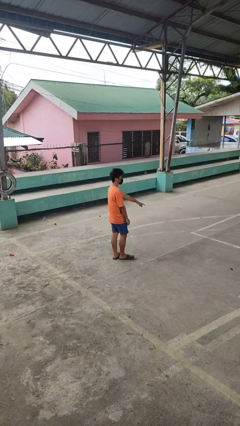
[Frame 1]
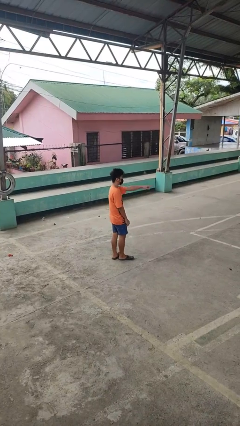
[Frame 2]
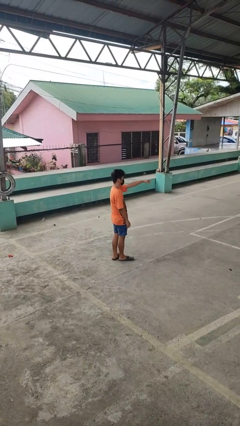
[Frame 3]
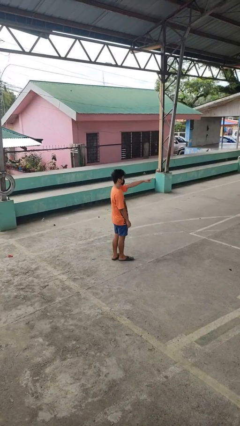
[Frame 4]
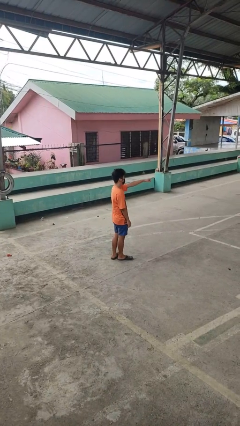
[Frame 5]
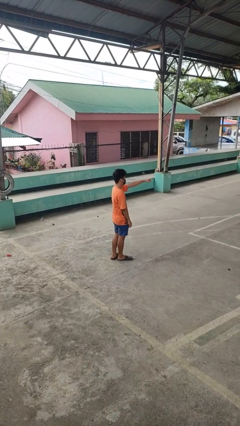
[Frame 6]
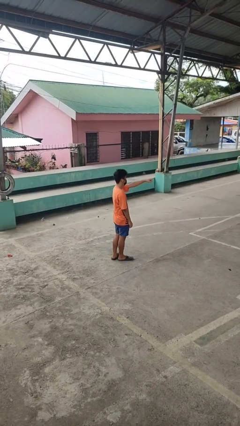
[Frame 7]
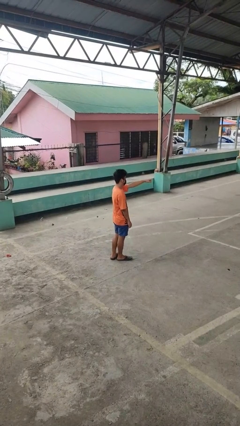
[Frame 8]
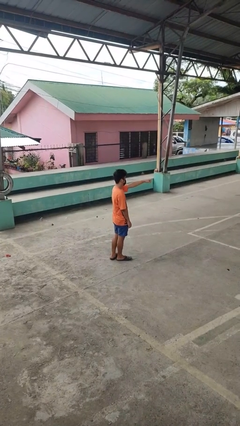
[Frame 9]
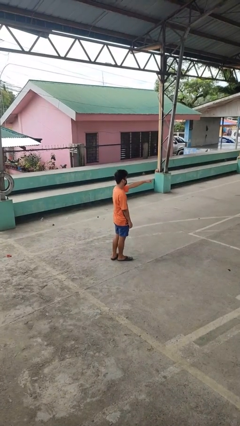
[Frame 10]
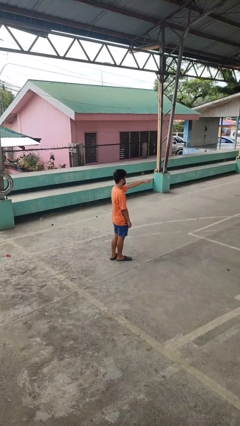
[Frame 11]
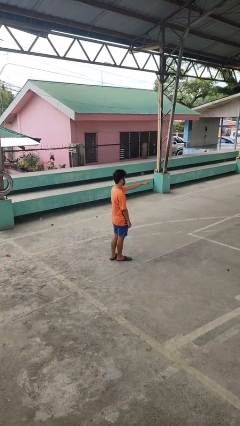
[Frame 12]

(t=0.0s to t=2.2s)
person points at person

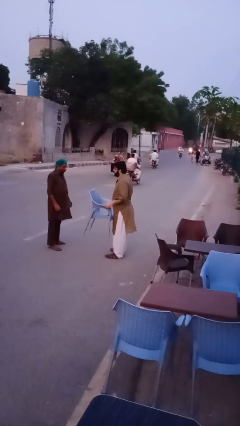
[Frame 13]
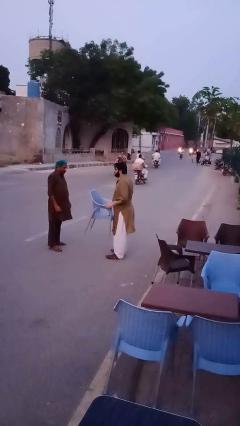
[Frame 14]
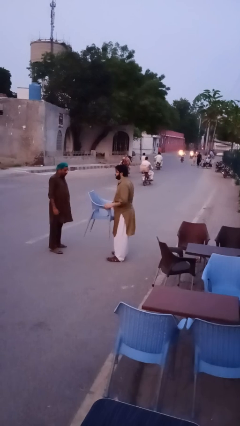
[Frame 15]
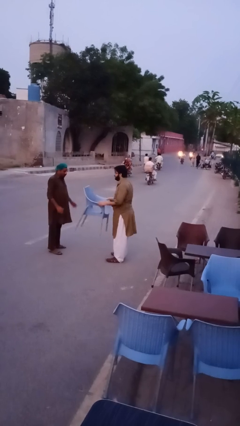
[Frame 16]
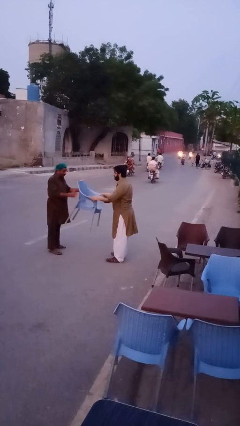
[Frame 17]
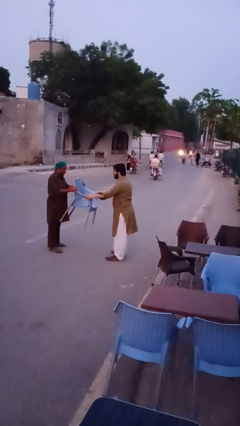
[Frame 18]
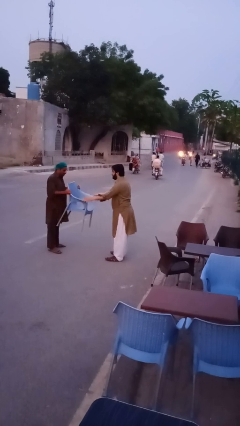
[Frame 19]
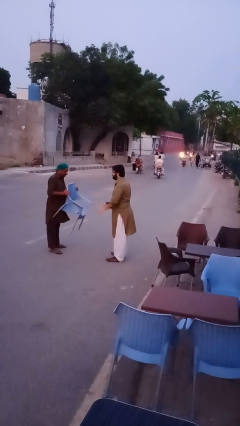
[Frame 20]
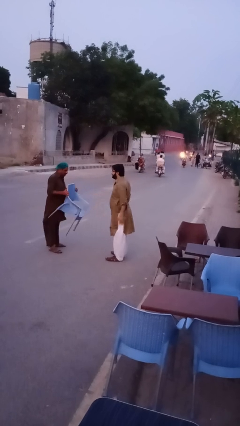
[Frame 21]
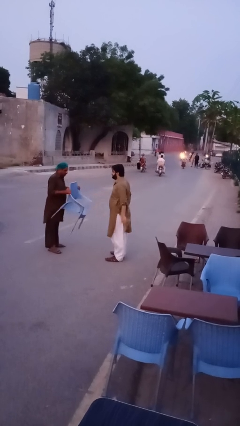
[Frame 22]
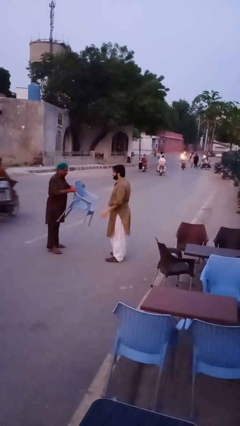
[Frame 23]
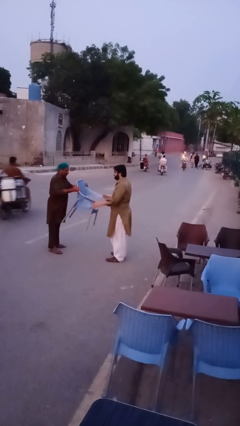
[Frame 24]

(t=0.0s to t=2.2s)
person transfers object to person

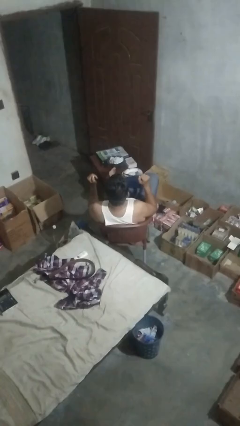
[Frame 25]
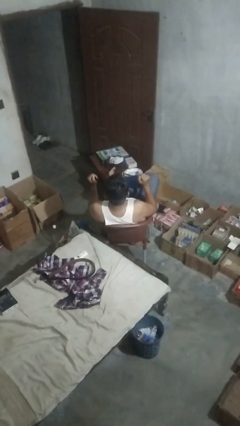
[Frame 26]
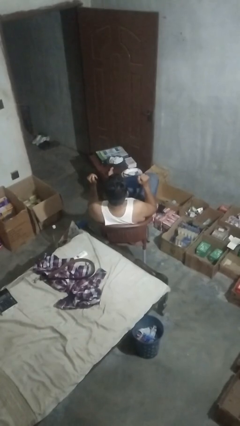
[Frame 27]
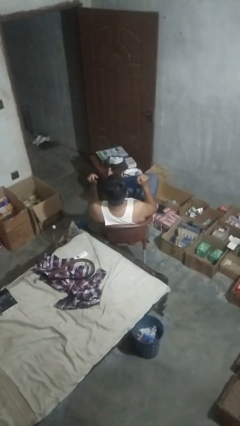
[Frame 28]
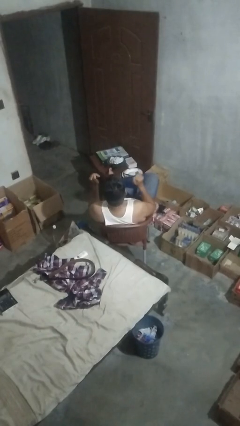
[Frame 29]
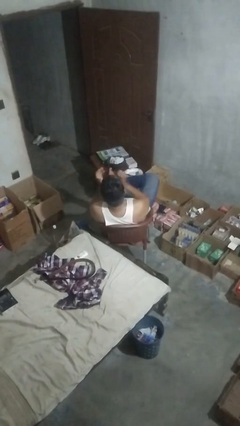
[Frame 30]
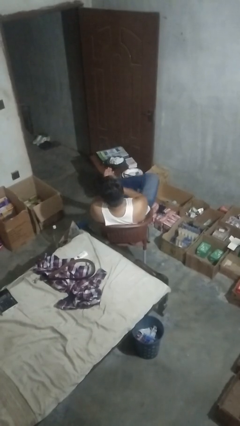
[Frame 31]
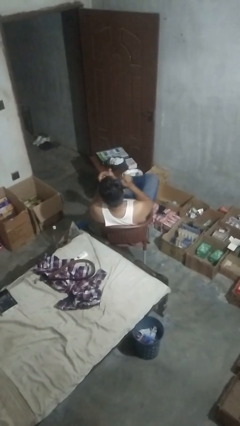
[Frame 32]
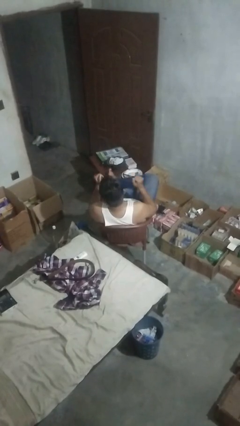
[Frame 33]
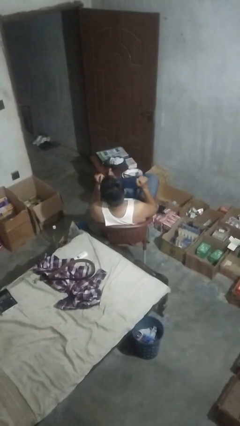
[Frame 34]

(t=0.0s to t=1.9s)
person claps hands

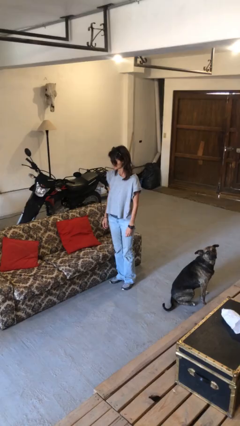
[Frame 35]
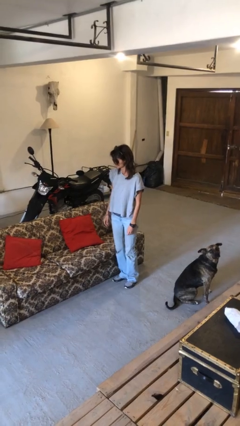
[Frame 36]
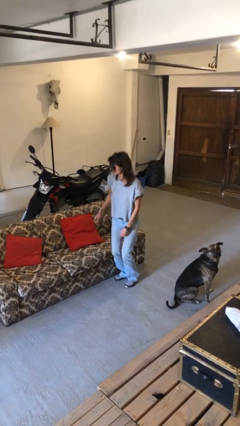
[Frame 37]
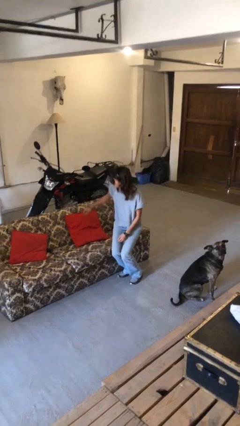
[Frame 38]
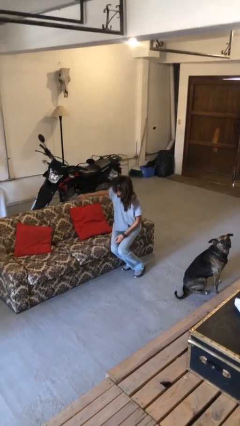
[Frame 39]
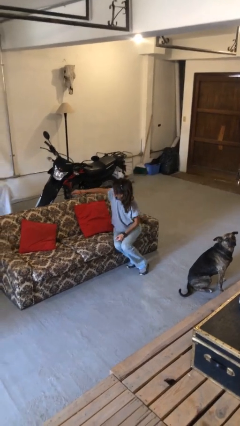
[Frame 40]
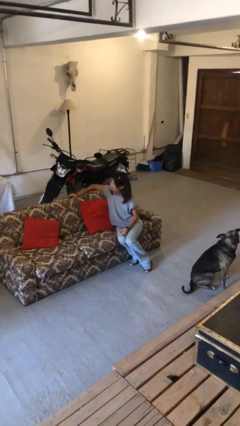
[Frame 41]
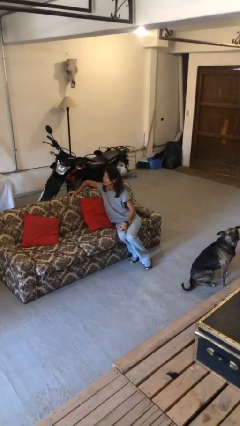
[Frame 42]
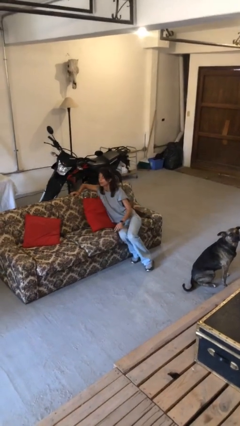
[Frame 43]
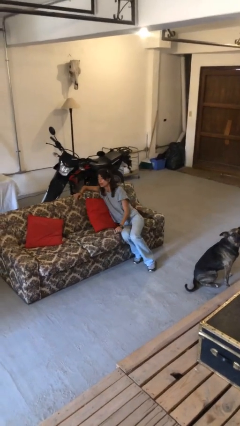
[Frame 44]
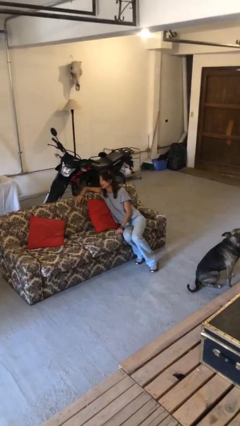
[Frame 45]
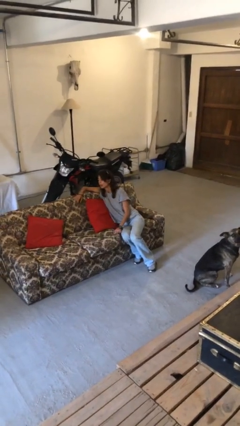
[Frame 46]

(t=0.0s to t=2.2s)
person lies down on couch

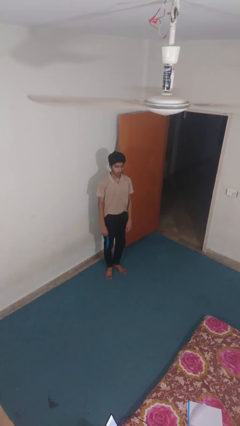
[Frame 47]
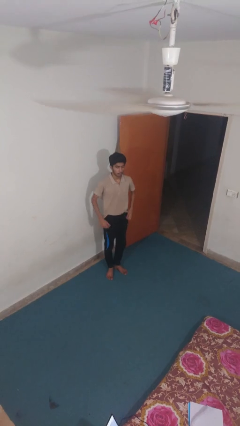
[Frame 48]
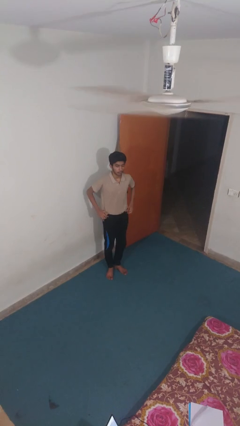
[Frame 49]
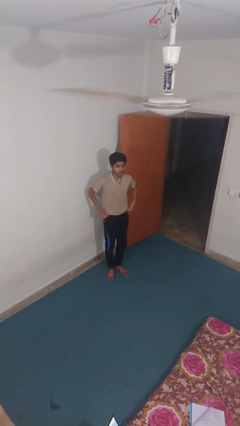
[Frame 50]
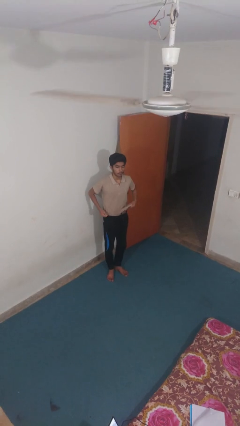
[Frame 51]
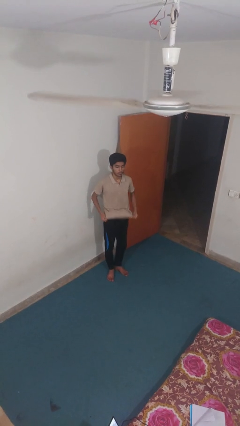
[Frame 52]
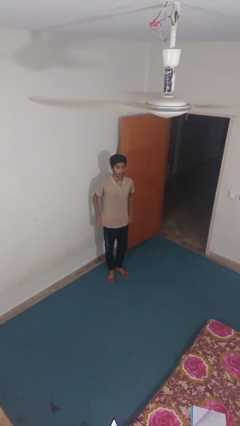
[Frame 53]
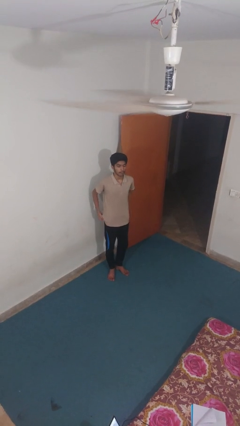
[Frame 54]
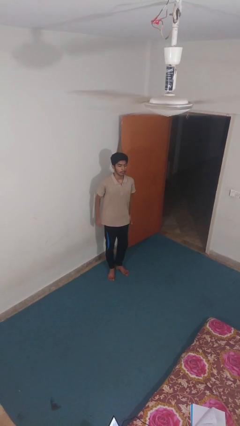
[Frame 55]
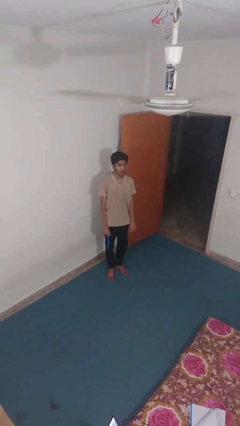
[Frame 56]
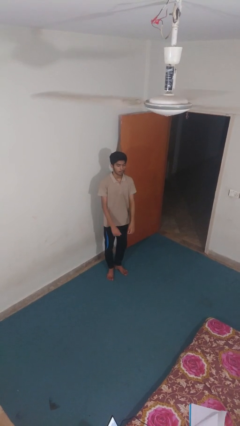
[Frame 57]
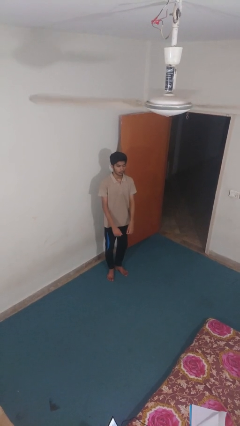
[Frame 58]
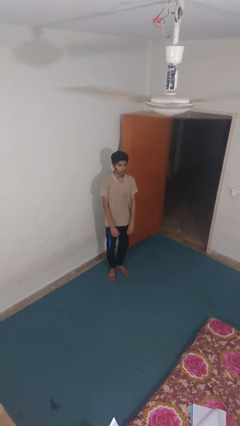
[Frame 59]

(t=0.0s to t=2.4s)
person untucks shirt

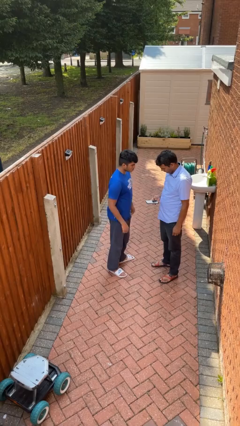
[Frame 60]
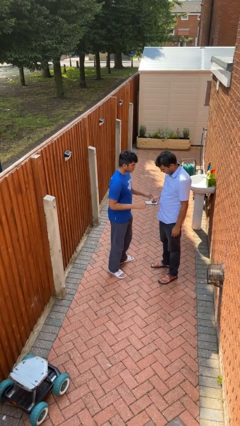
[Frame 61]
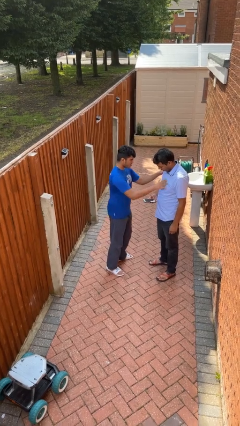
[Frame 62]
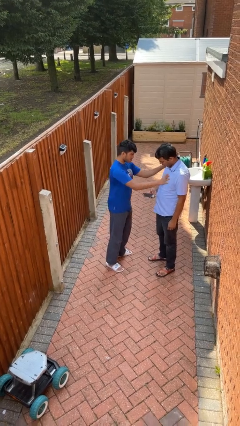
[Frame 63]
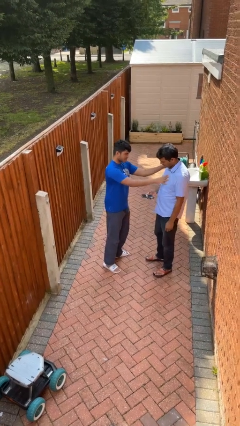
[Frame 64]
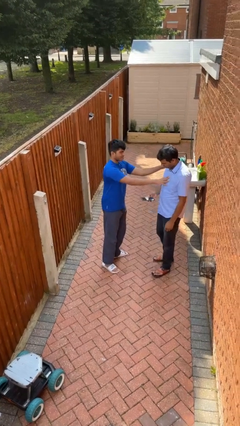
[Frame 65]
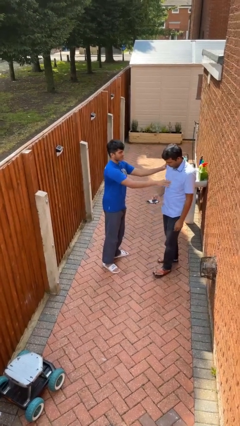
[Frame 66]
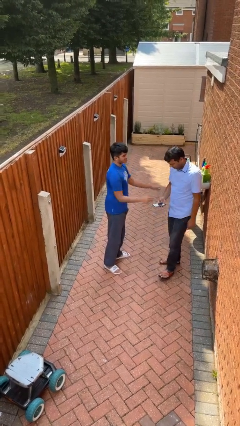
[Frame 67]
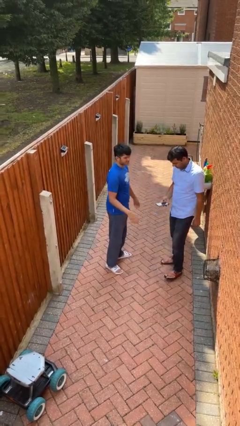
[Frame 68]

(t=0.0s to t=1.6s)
person shoves person

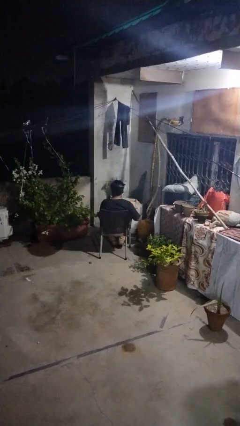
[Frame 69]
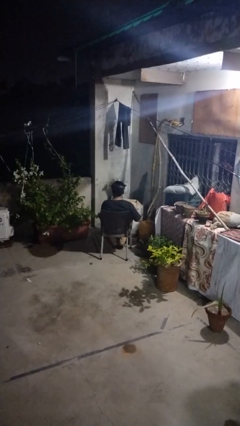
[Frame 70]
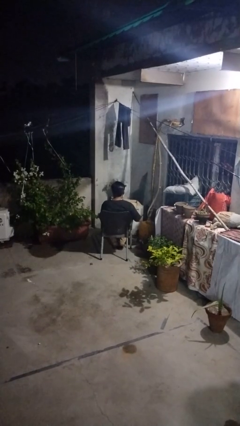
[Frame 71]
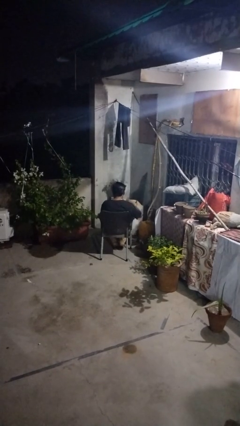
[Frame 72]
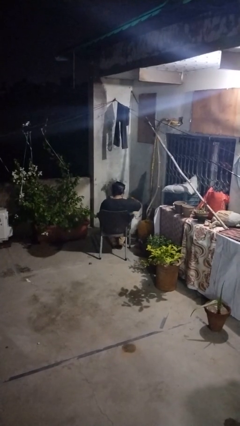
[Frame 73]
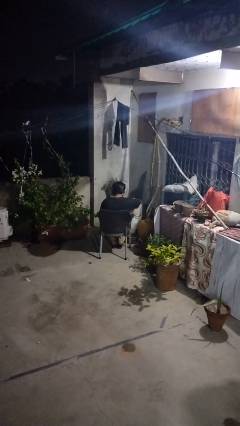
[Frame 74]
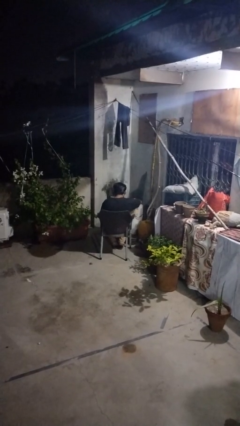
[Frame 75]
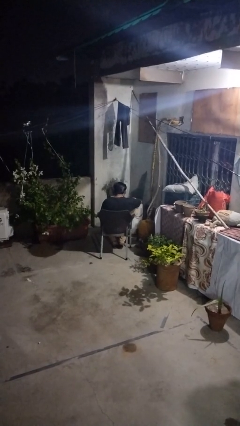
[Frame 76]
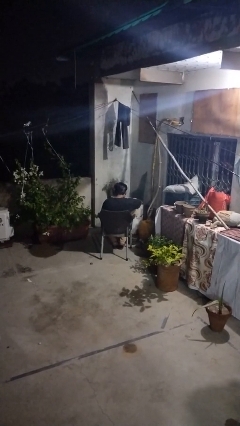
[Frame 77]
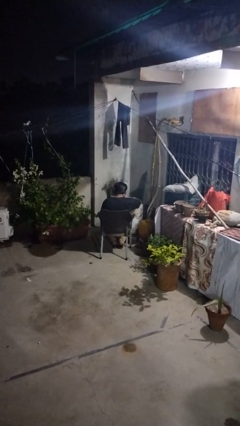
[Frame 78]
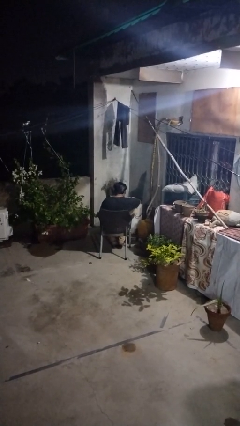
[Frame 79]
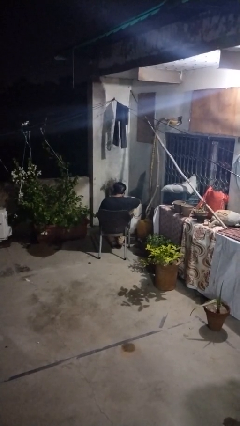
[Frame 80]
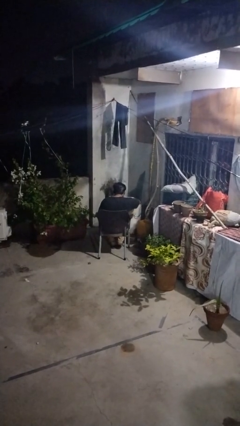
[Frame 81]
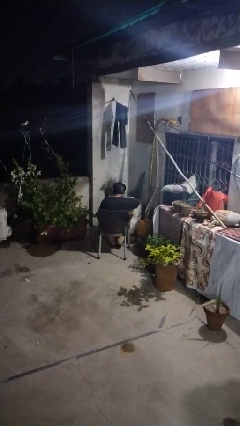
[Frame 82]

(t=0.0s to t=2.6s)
person searches in box

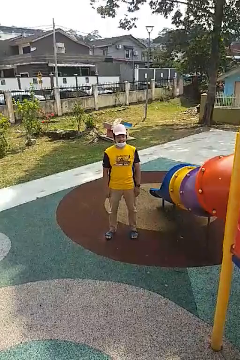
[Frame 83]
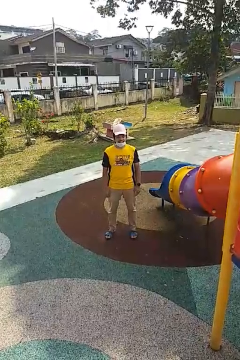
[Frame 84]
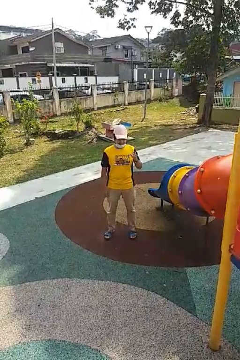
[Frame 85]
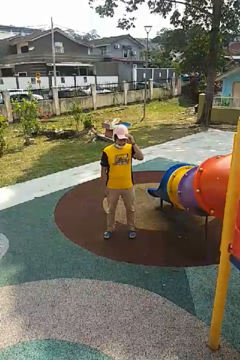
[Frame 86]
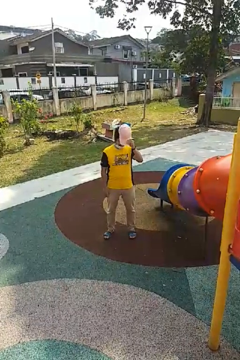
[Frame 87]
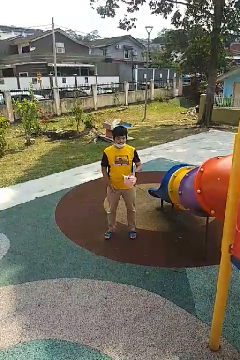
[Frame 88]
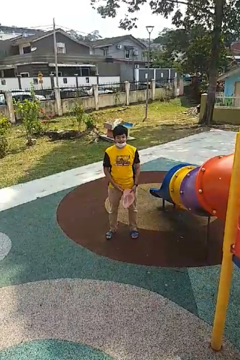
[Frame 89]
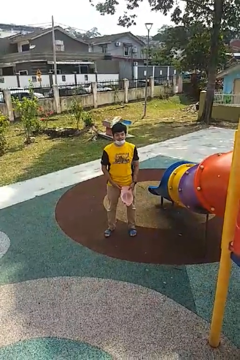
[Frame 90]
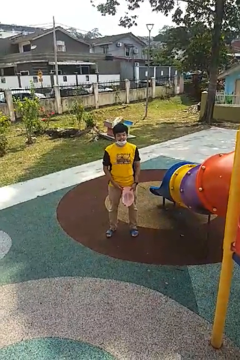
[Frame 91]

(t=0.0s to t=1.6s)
person takes off hat

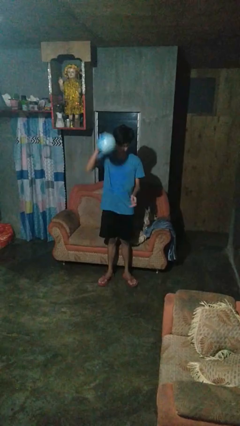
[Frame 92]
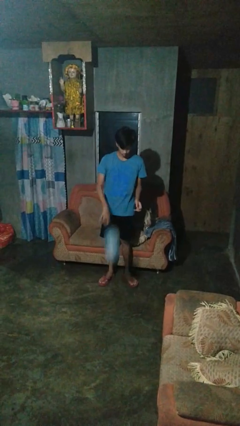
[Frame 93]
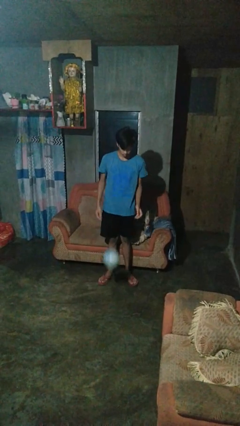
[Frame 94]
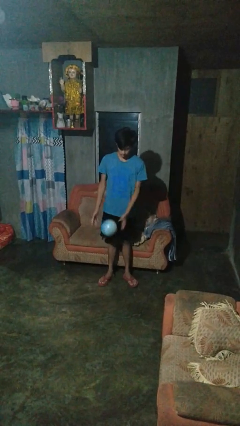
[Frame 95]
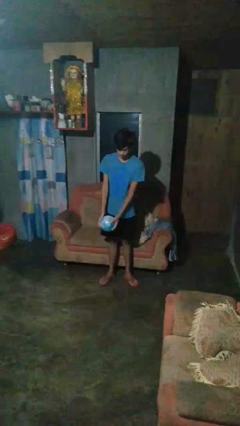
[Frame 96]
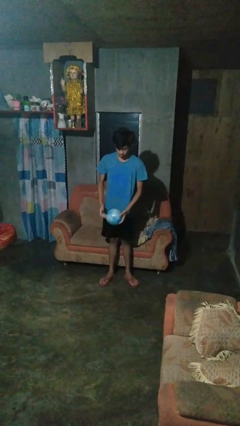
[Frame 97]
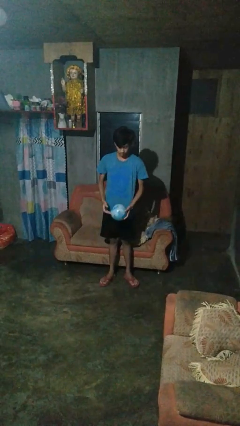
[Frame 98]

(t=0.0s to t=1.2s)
person bounces ball on floor
